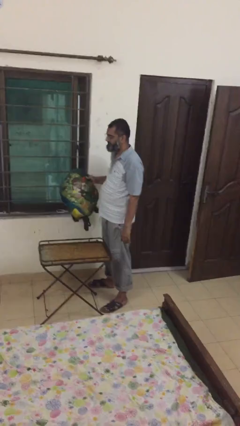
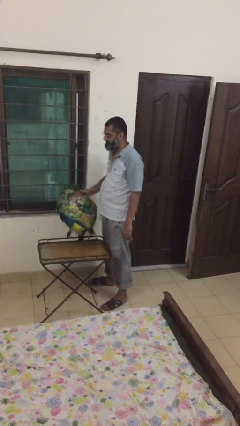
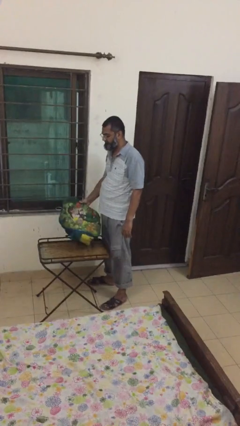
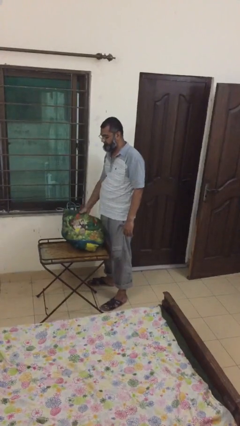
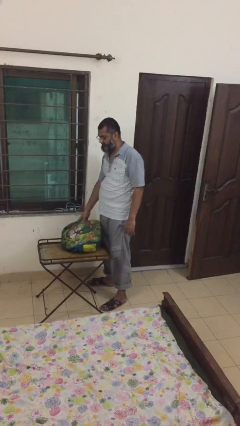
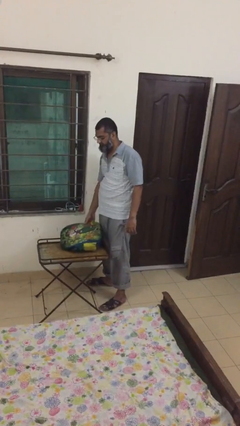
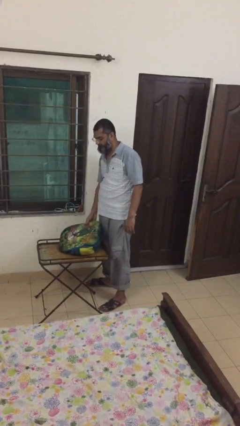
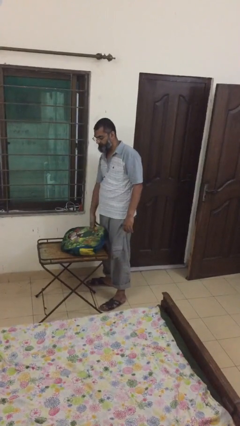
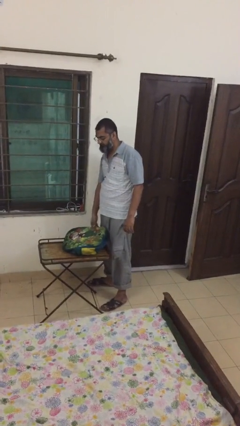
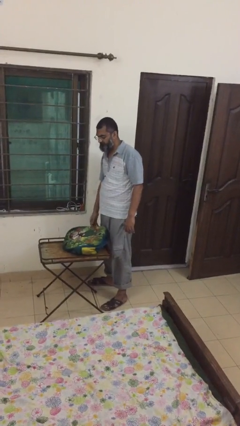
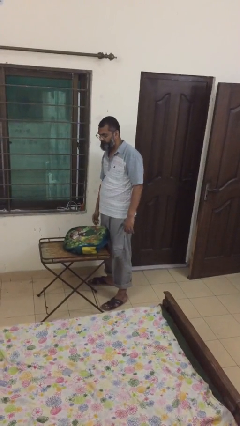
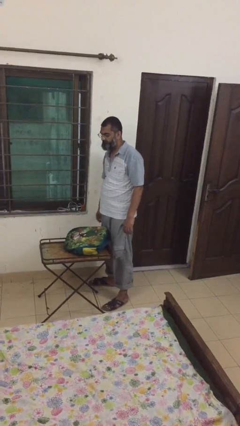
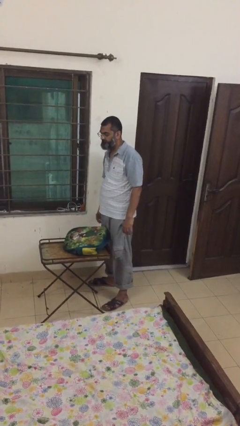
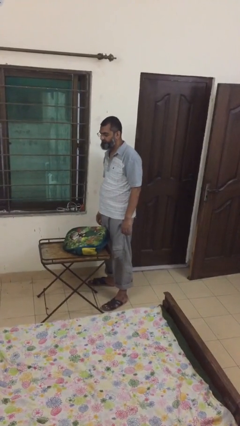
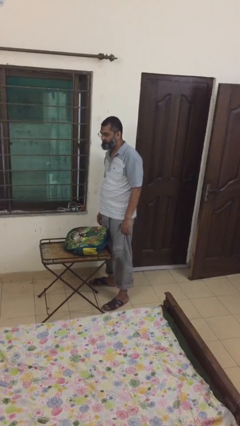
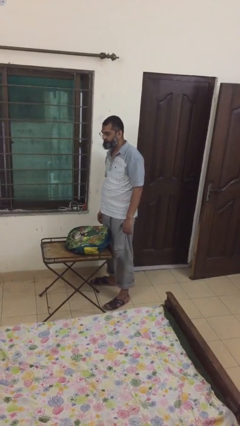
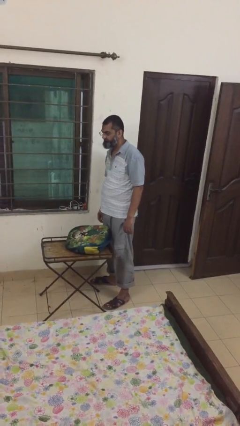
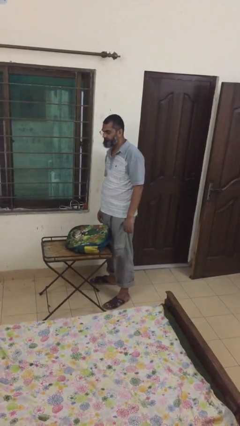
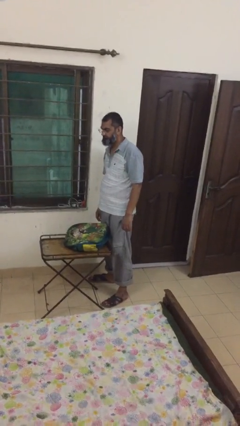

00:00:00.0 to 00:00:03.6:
person puts down object on table

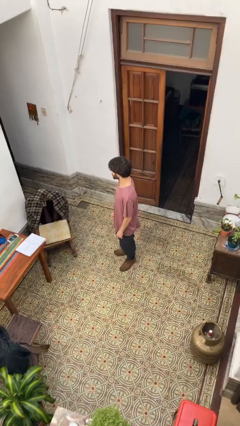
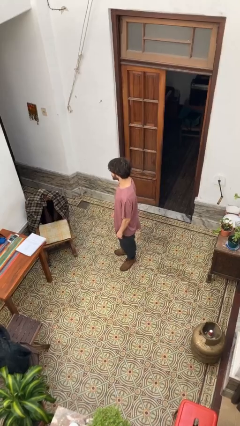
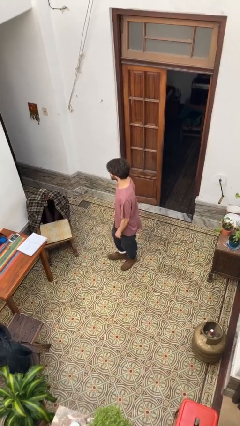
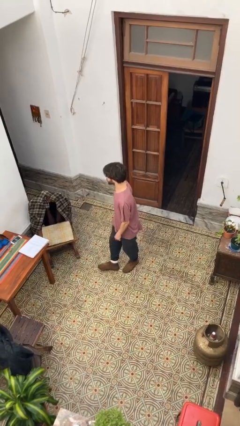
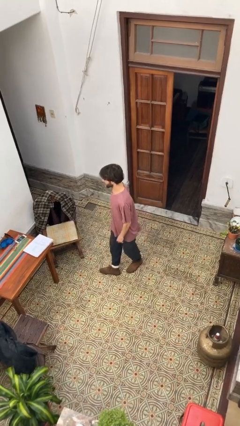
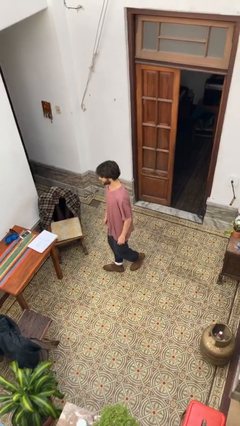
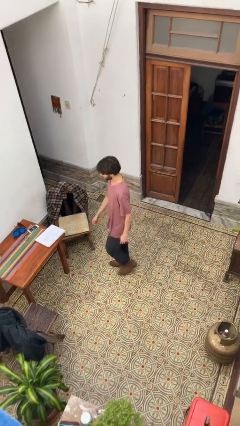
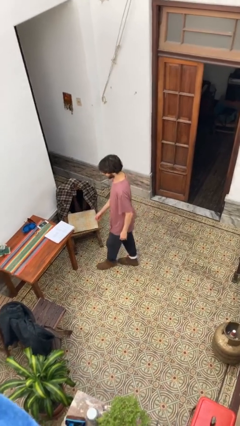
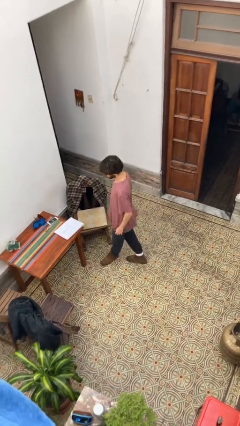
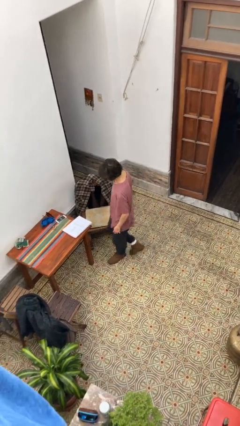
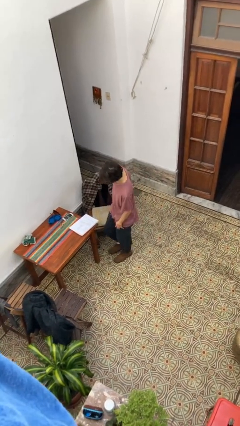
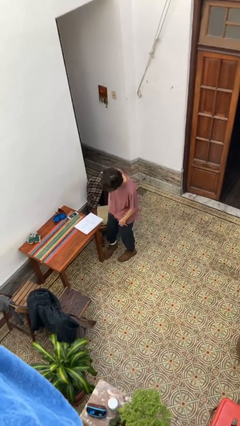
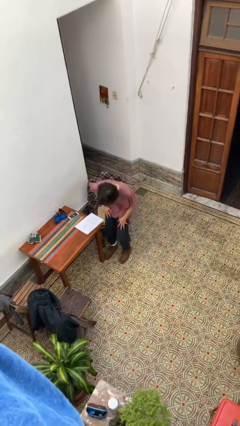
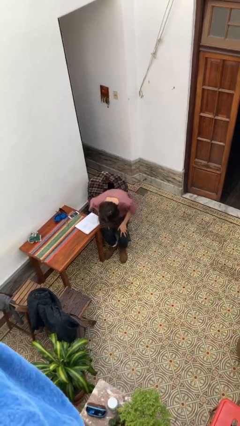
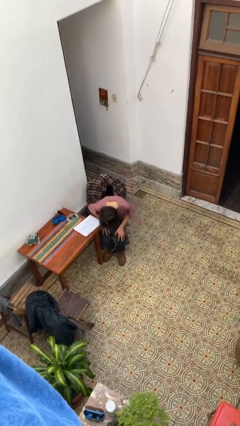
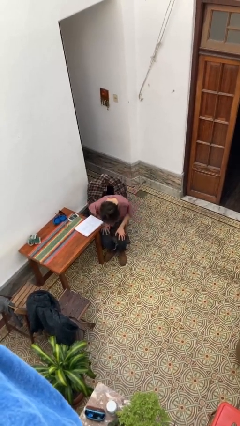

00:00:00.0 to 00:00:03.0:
person sits down

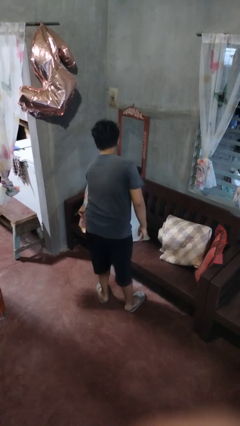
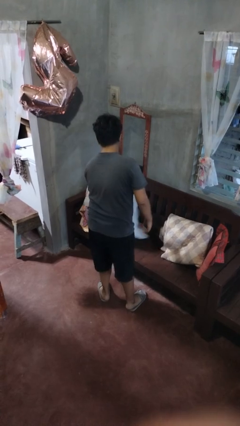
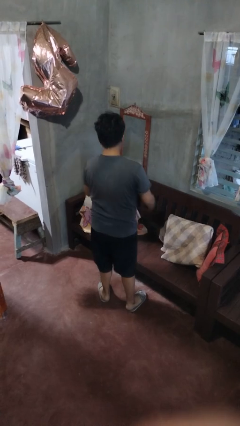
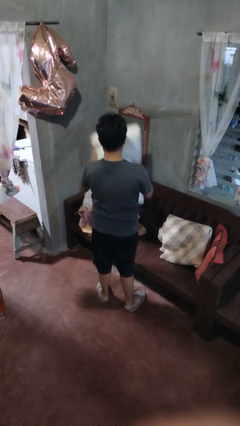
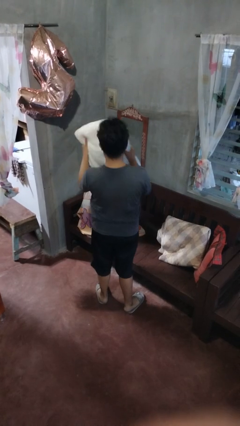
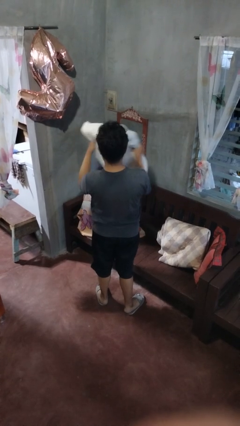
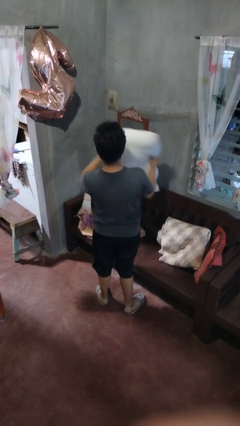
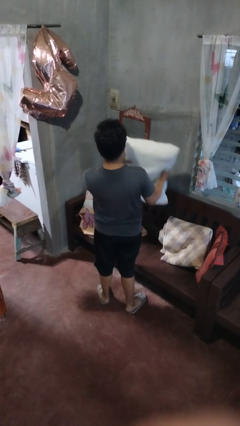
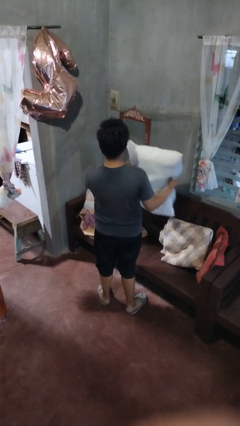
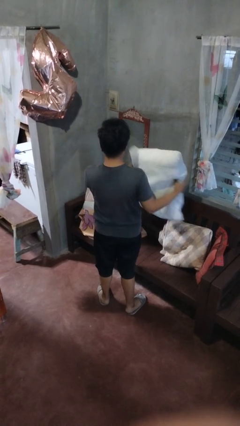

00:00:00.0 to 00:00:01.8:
person picks up object from couch

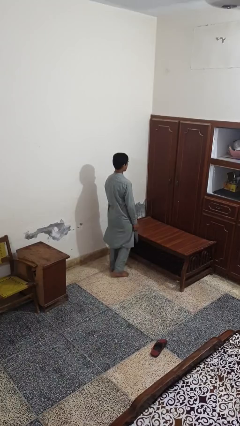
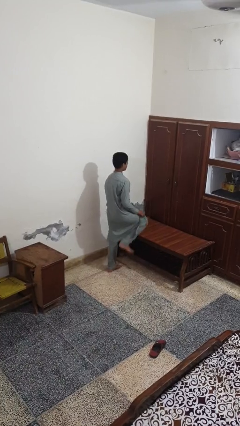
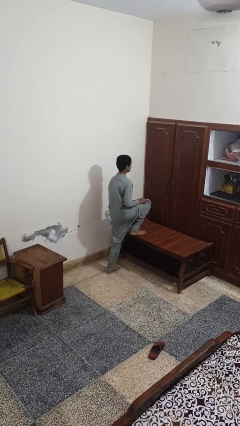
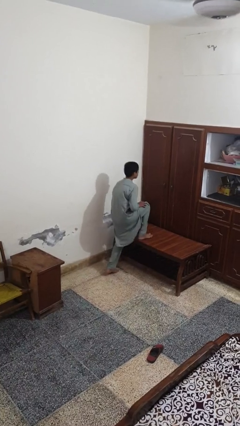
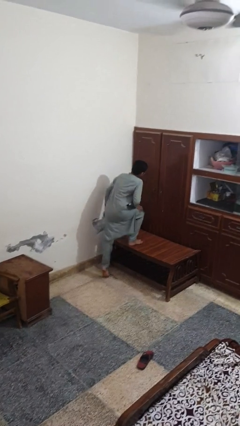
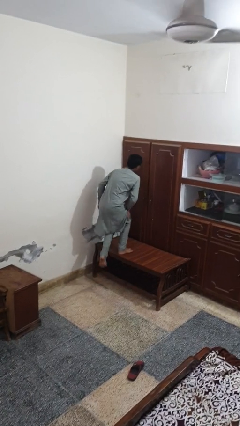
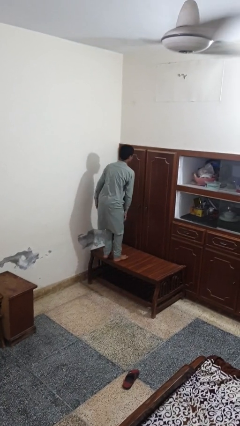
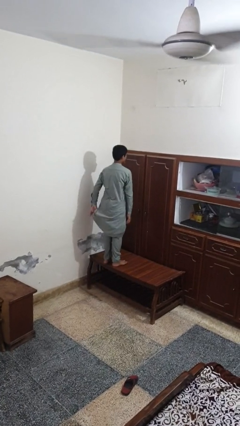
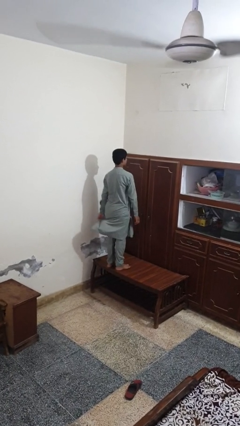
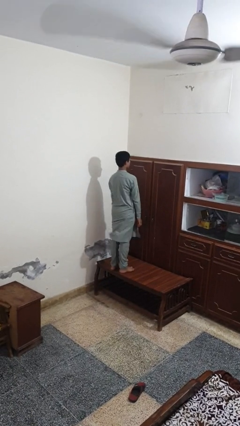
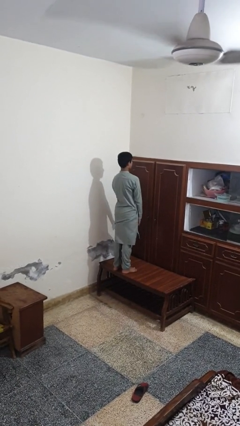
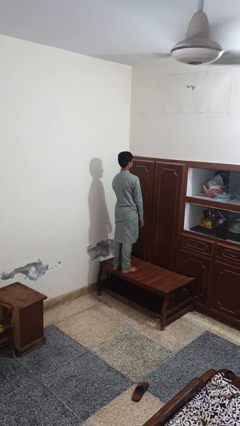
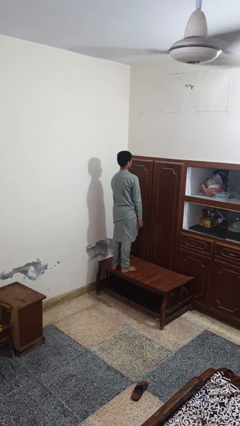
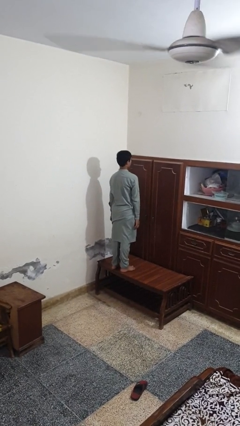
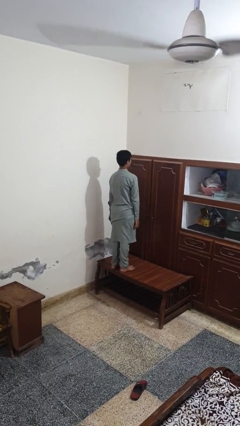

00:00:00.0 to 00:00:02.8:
person climbs on table

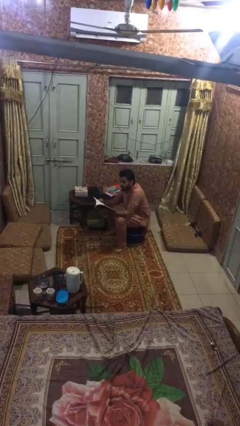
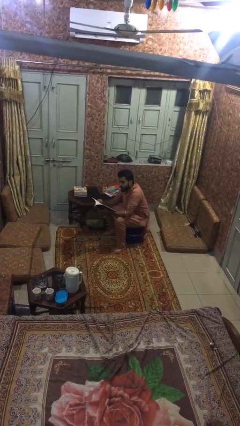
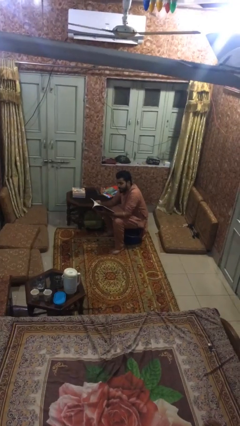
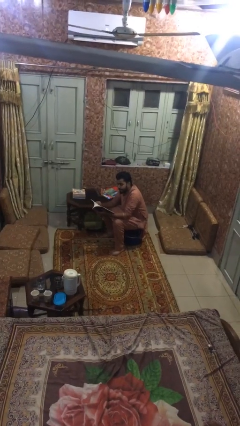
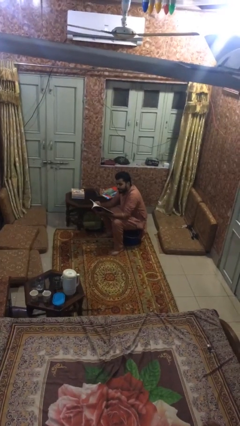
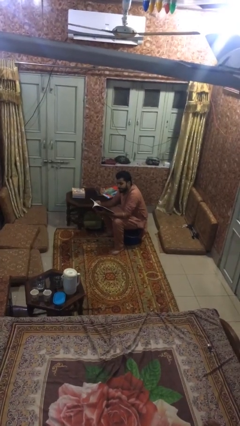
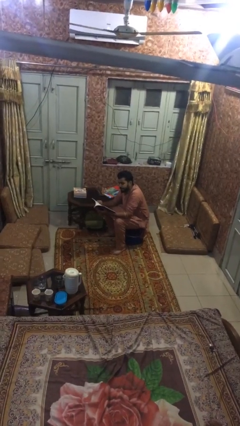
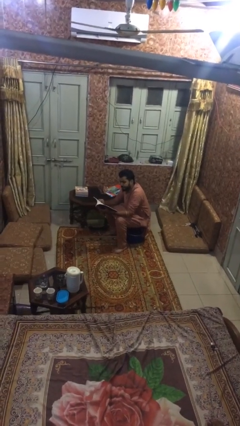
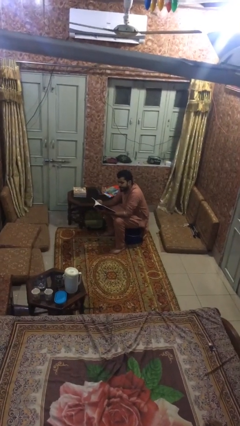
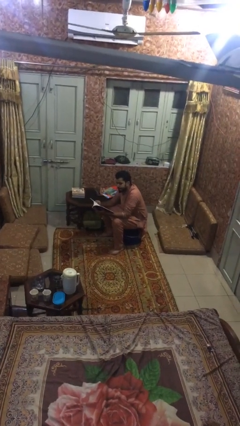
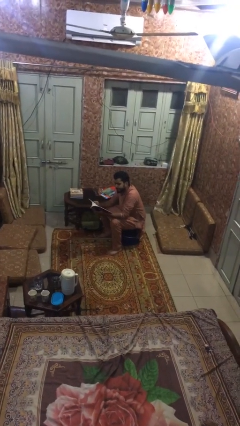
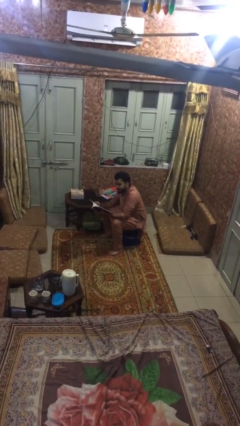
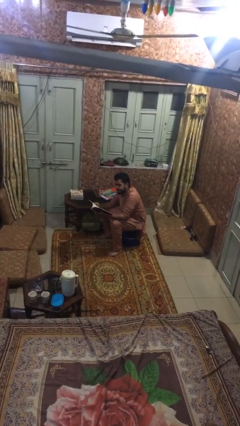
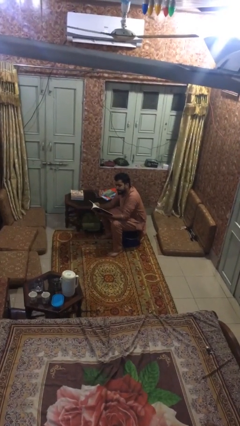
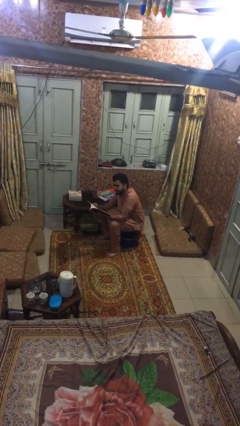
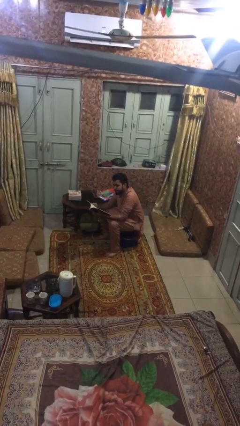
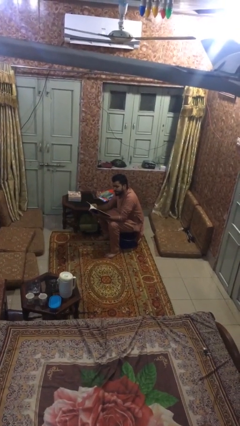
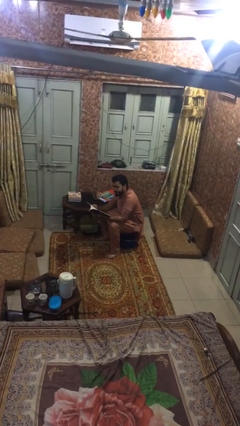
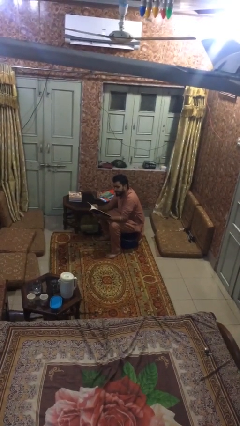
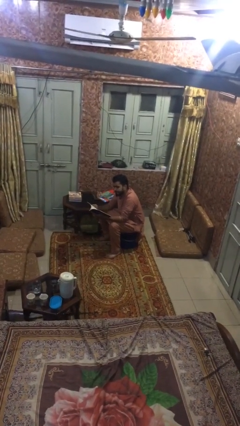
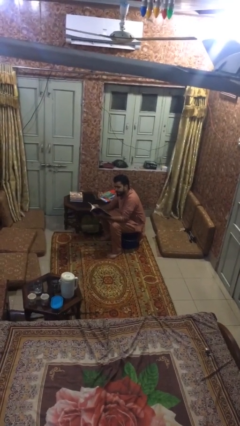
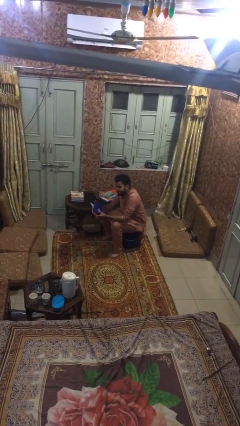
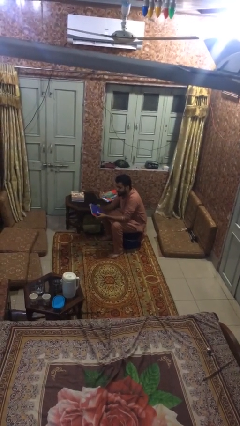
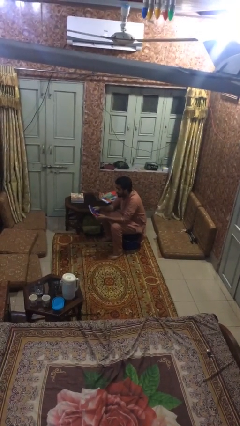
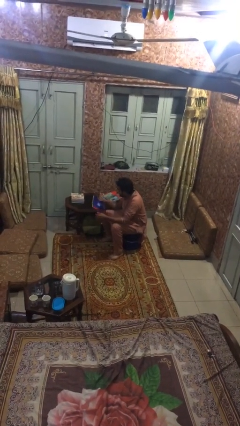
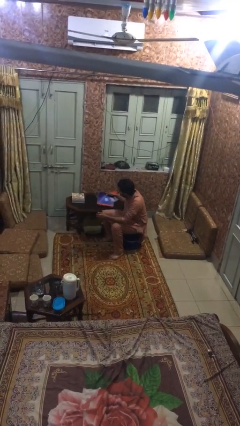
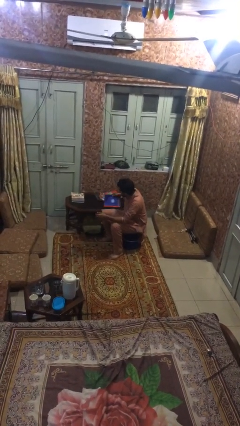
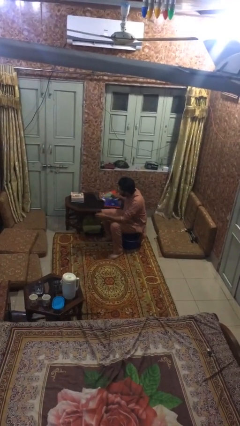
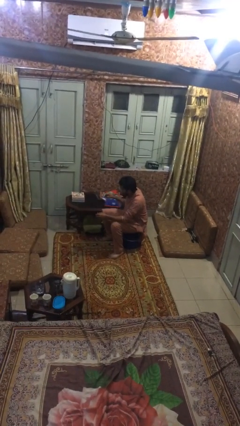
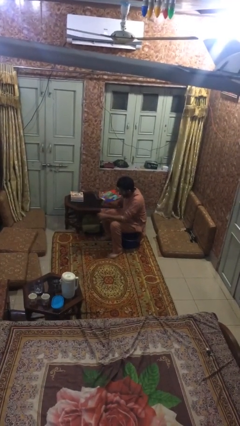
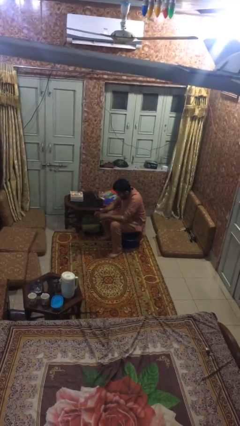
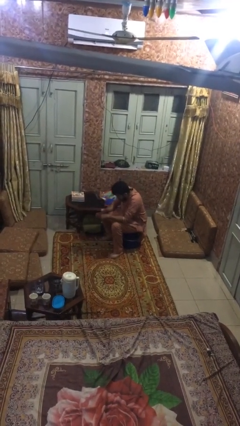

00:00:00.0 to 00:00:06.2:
person reads document

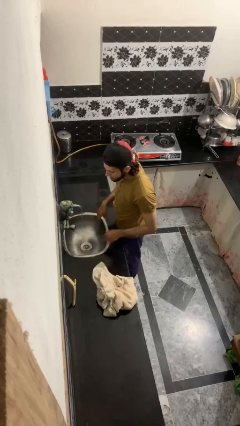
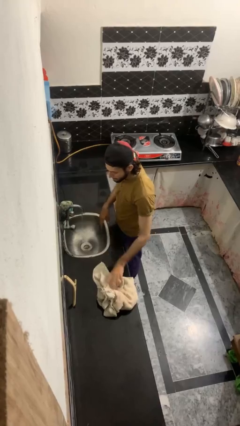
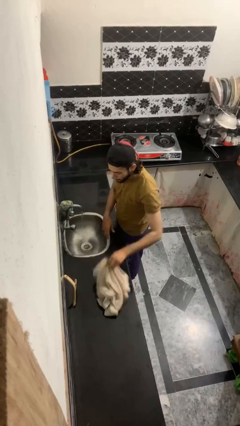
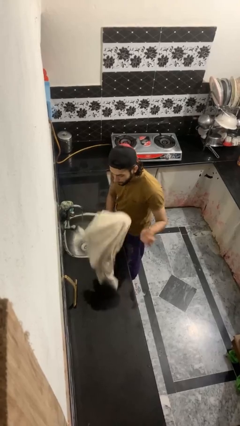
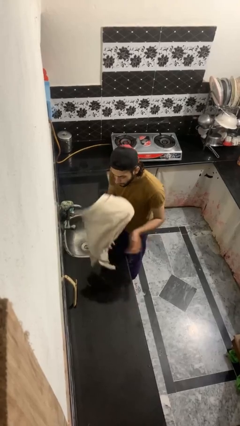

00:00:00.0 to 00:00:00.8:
person dries face with towel
